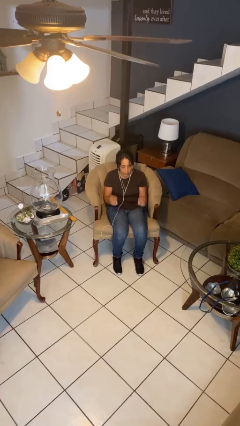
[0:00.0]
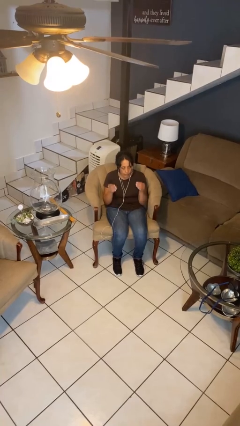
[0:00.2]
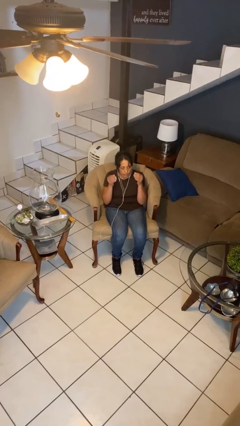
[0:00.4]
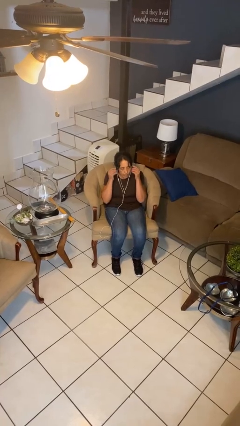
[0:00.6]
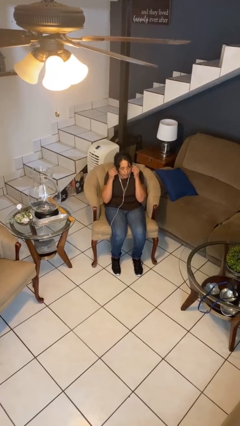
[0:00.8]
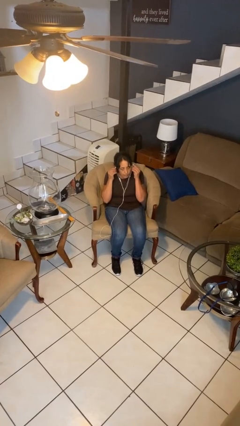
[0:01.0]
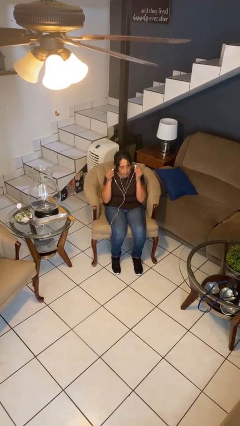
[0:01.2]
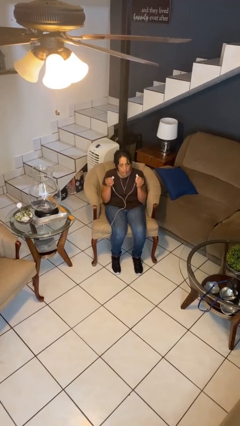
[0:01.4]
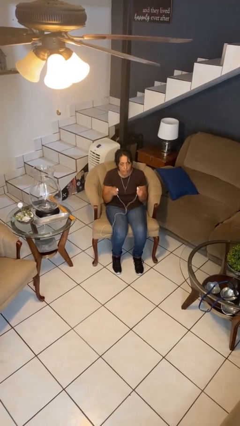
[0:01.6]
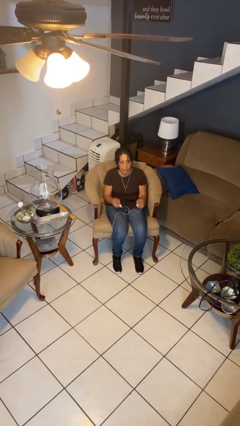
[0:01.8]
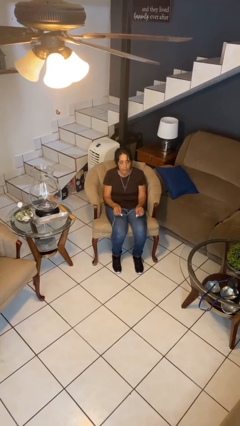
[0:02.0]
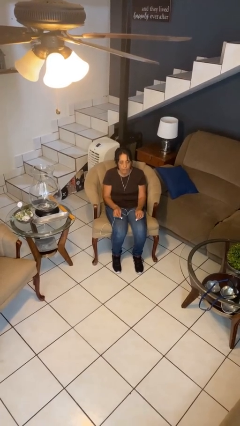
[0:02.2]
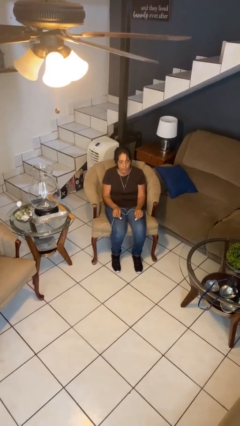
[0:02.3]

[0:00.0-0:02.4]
person takes off headphones

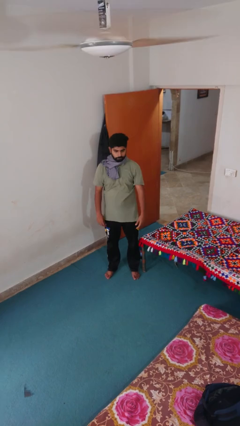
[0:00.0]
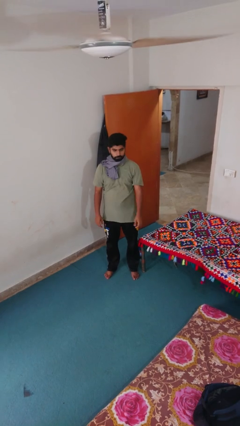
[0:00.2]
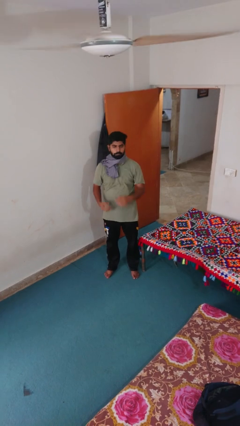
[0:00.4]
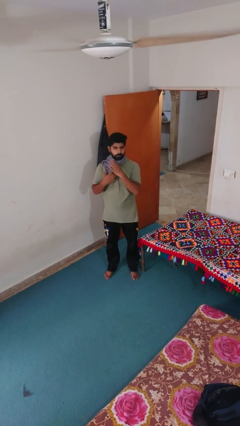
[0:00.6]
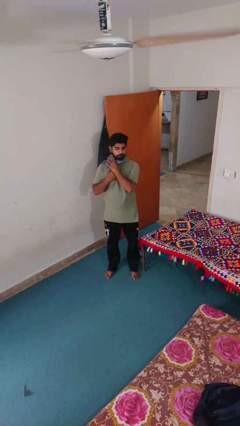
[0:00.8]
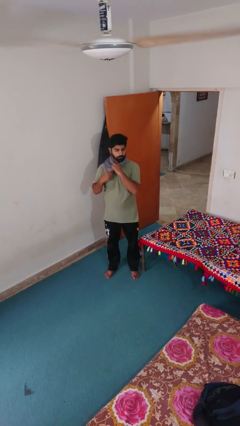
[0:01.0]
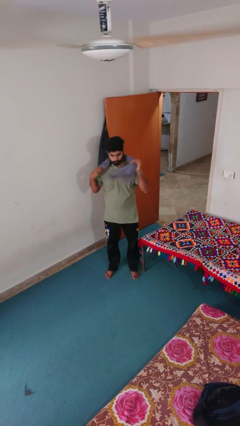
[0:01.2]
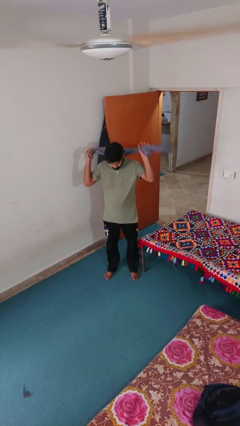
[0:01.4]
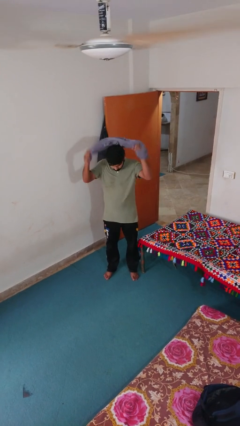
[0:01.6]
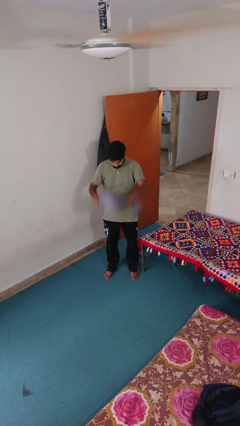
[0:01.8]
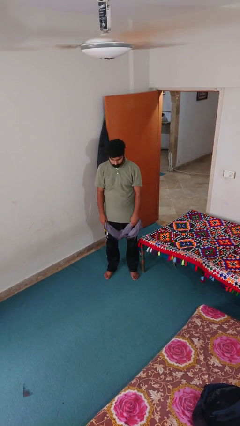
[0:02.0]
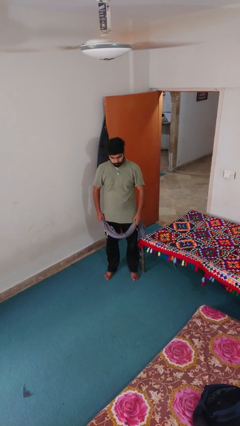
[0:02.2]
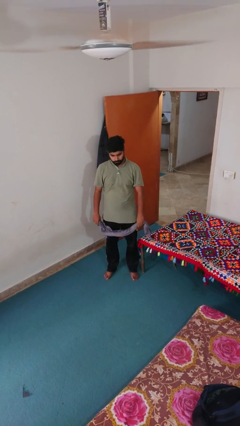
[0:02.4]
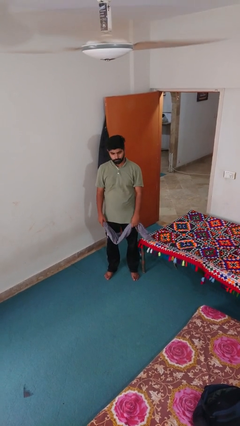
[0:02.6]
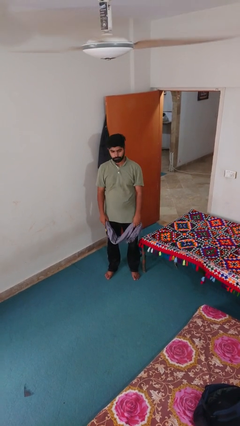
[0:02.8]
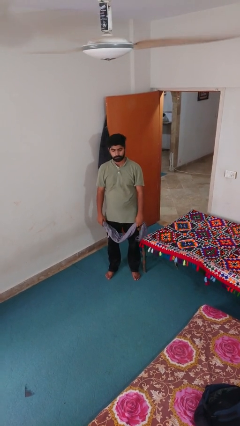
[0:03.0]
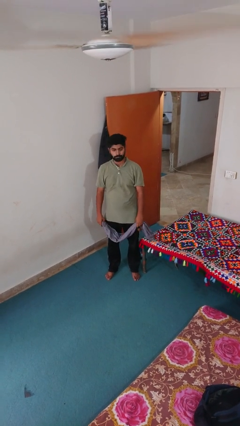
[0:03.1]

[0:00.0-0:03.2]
person takes off scarf

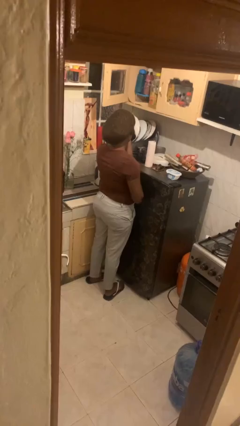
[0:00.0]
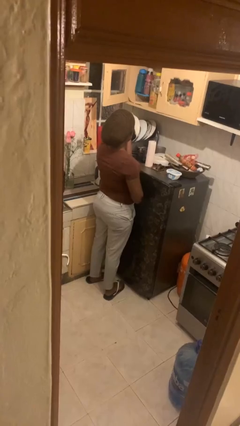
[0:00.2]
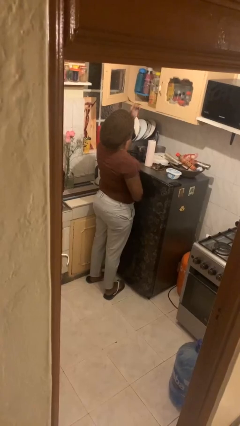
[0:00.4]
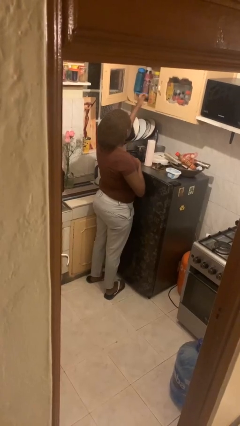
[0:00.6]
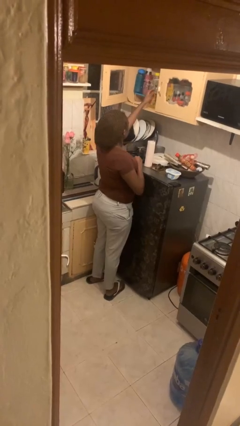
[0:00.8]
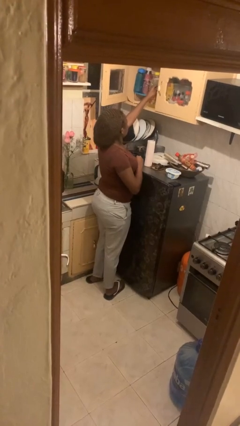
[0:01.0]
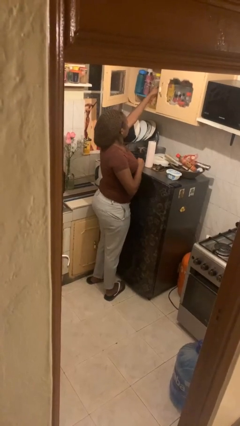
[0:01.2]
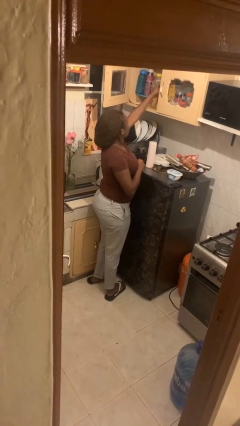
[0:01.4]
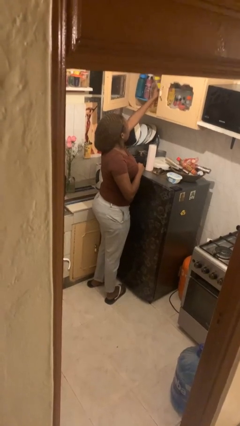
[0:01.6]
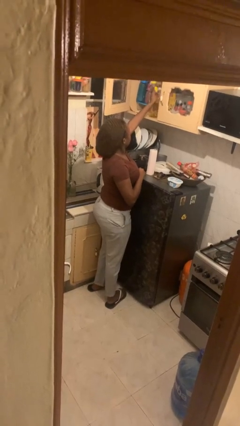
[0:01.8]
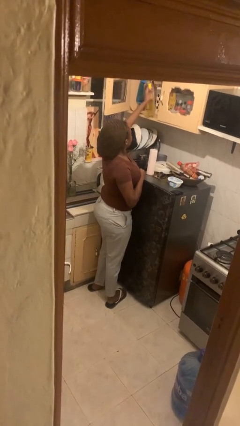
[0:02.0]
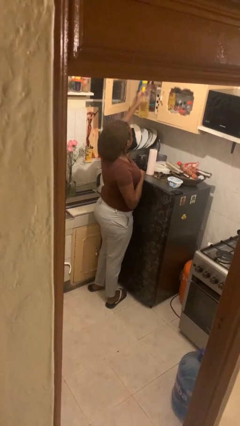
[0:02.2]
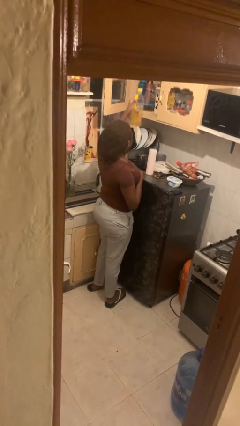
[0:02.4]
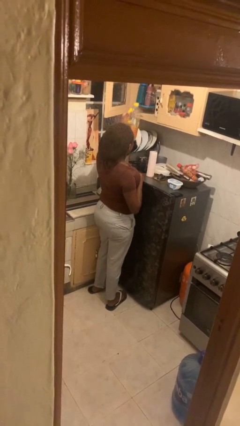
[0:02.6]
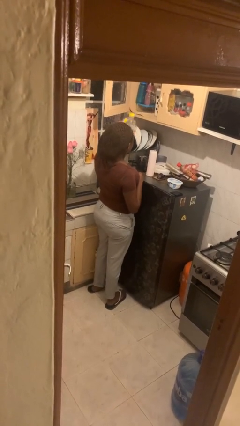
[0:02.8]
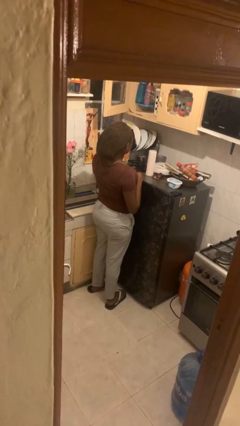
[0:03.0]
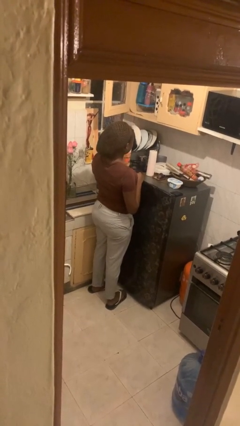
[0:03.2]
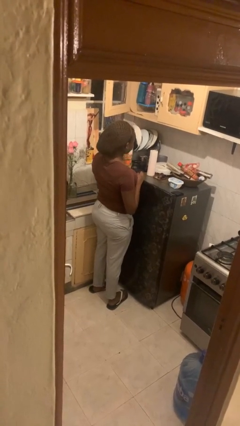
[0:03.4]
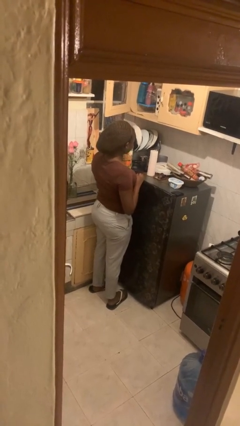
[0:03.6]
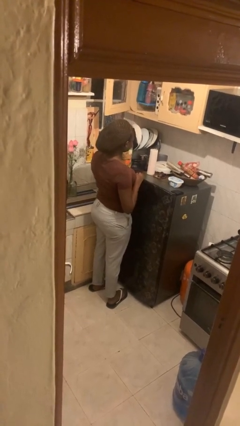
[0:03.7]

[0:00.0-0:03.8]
person picks up object from cabinet

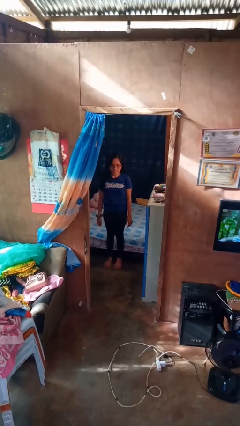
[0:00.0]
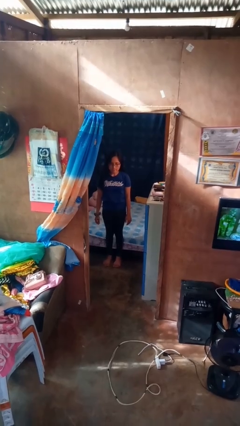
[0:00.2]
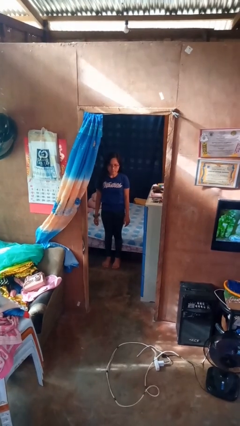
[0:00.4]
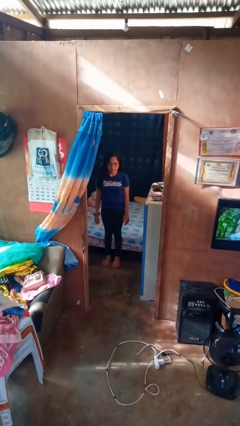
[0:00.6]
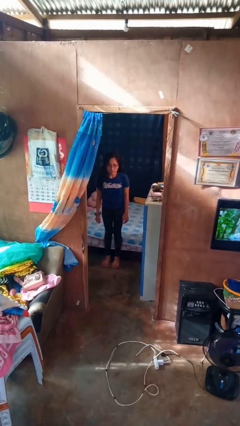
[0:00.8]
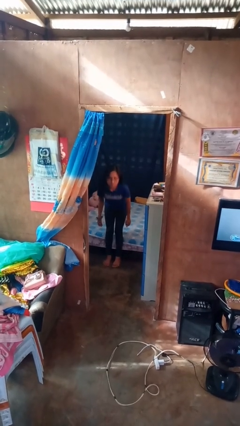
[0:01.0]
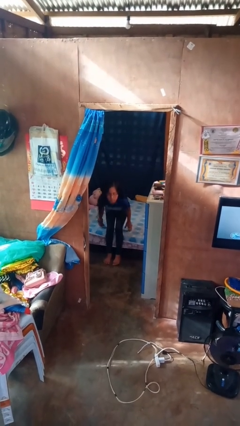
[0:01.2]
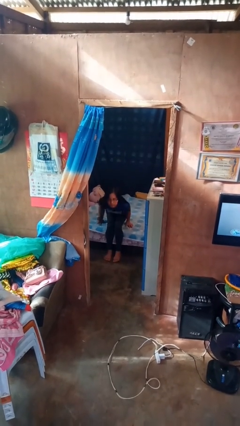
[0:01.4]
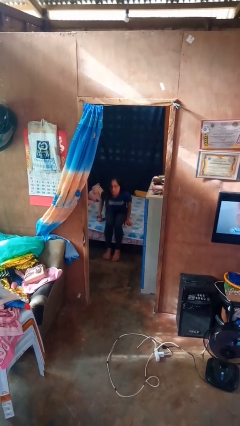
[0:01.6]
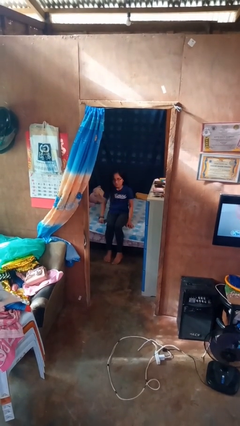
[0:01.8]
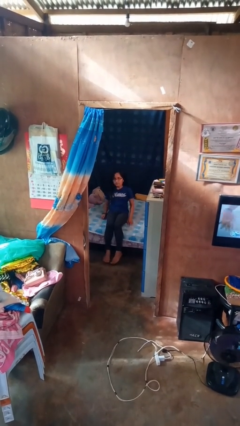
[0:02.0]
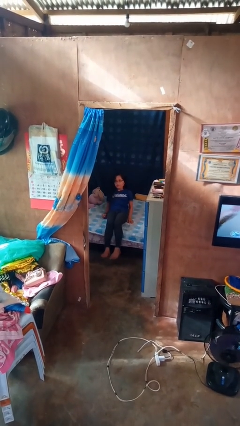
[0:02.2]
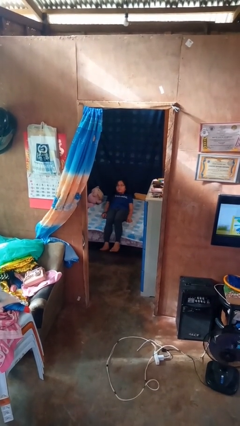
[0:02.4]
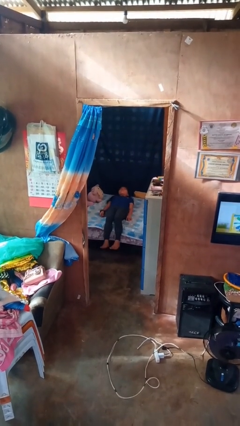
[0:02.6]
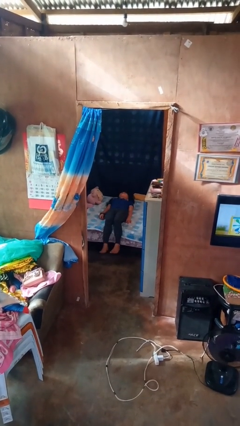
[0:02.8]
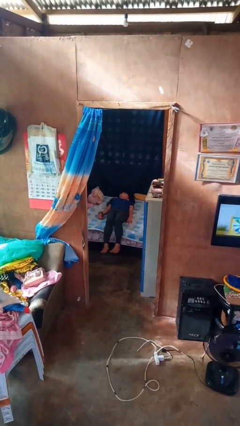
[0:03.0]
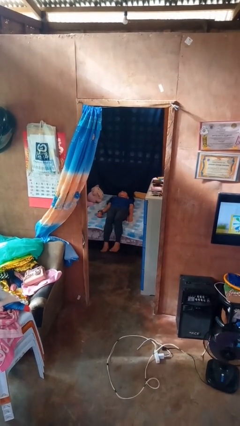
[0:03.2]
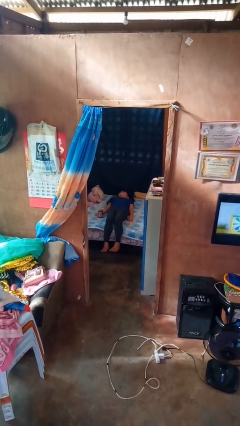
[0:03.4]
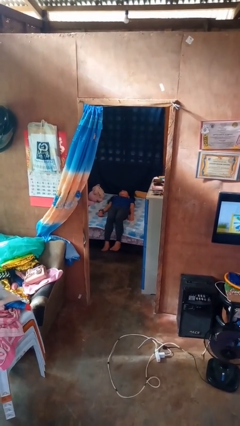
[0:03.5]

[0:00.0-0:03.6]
person lies down on bed

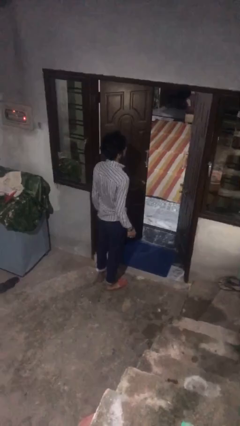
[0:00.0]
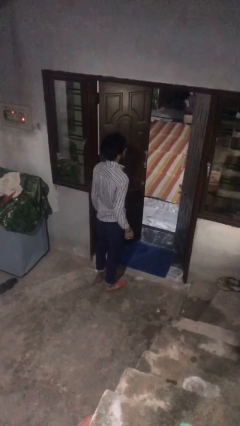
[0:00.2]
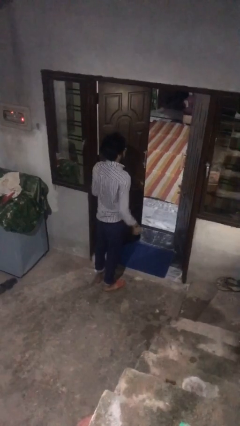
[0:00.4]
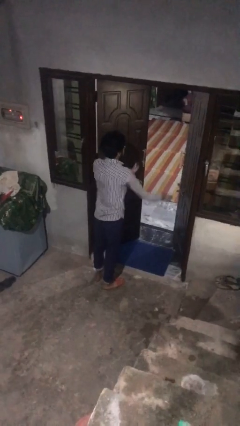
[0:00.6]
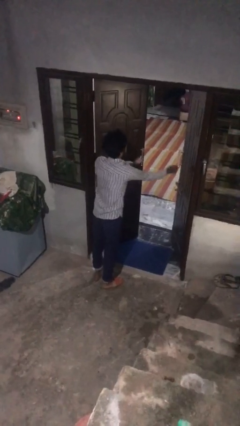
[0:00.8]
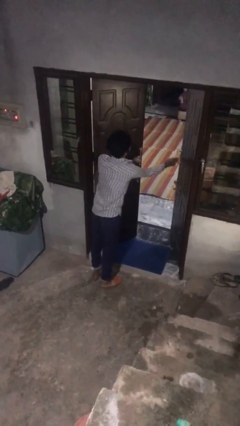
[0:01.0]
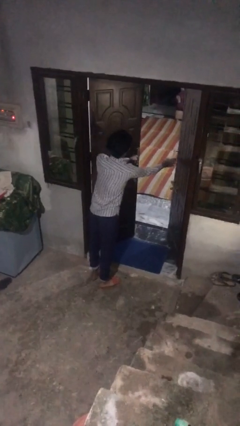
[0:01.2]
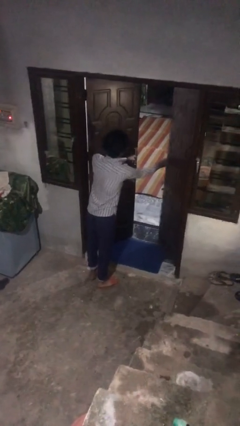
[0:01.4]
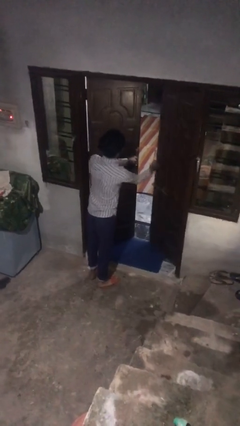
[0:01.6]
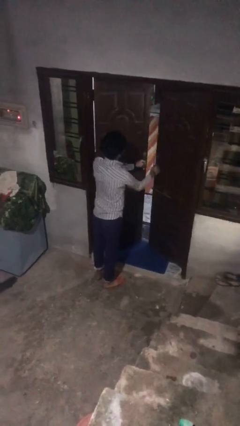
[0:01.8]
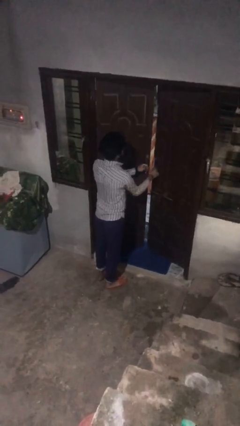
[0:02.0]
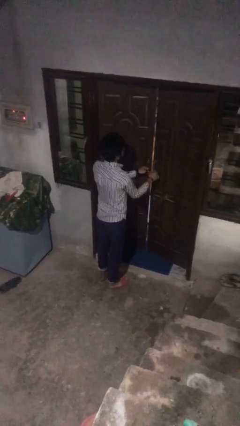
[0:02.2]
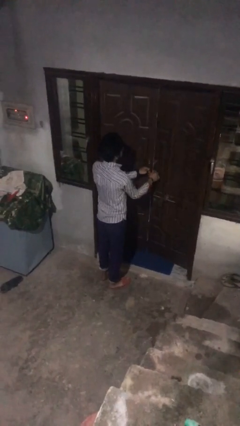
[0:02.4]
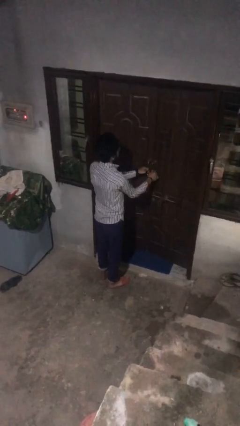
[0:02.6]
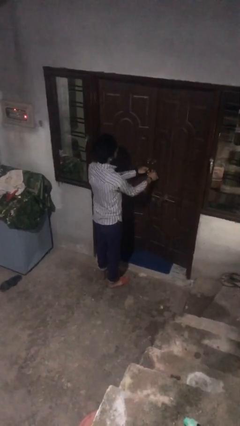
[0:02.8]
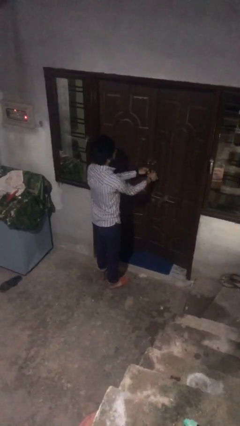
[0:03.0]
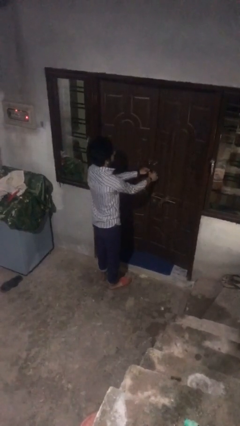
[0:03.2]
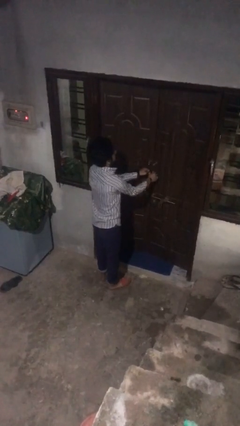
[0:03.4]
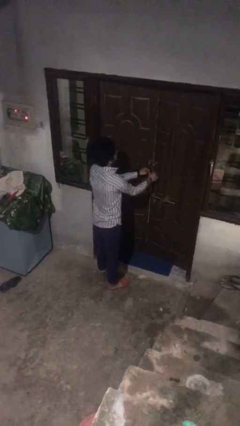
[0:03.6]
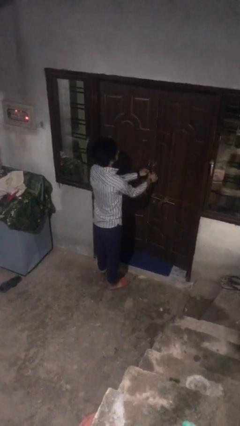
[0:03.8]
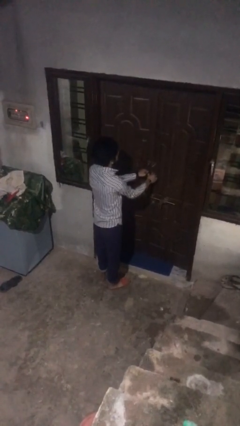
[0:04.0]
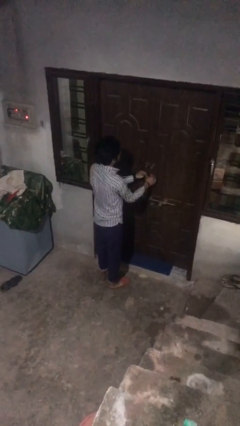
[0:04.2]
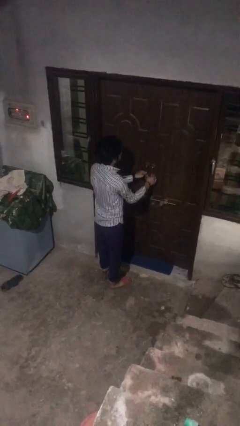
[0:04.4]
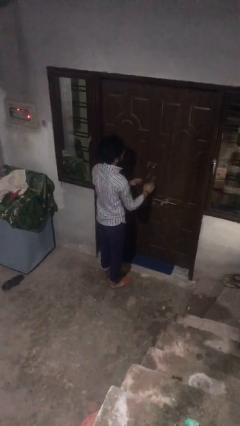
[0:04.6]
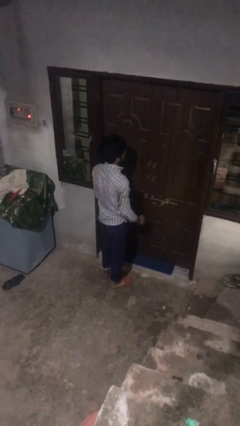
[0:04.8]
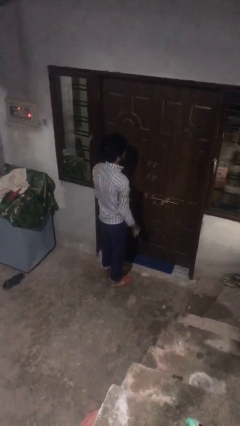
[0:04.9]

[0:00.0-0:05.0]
person closes facility door
